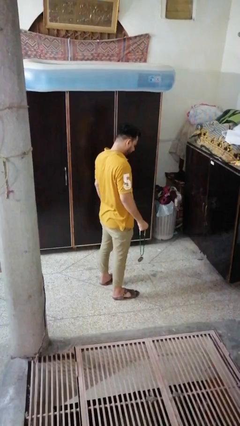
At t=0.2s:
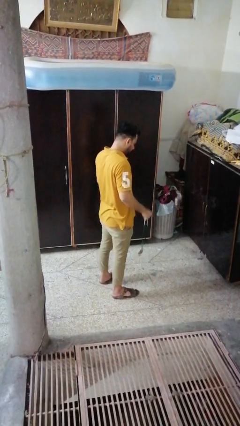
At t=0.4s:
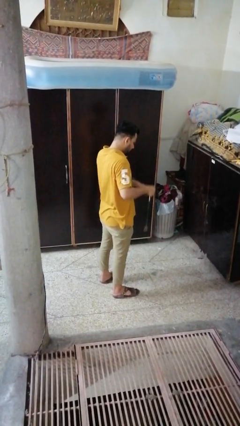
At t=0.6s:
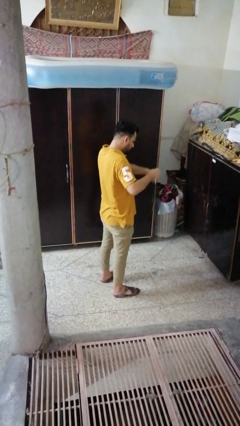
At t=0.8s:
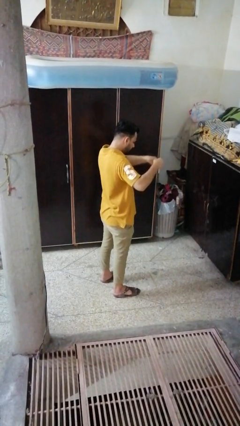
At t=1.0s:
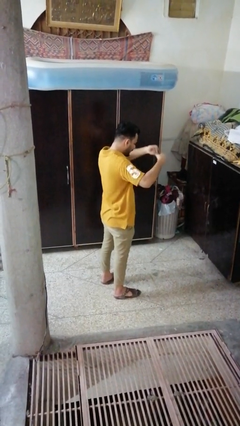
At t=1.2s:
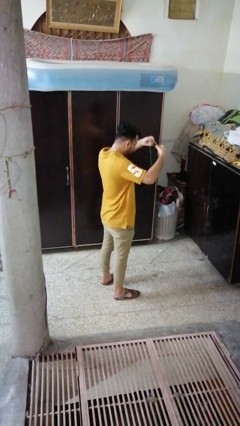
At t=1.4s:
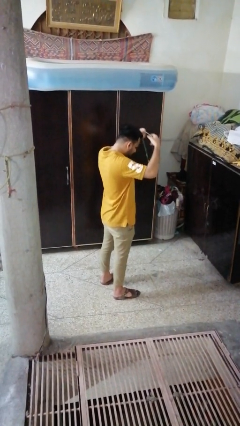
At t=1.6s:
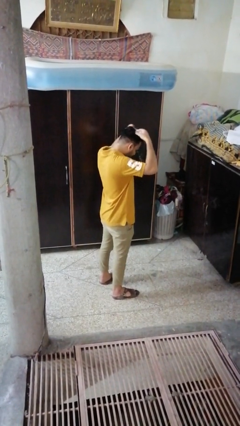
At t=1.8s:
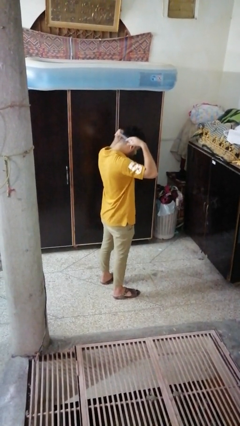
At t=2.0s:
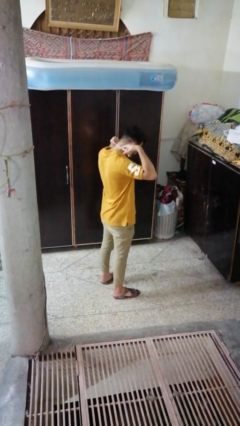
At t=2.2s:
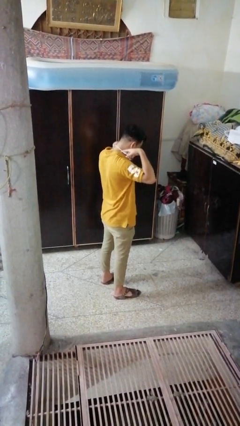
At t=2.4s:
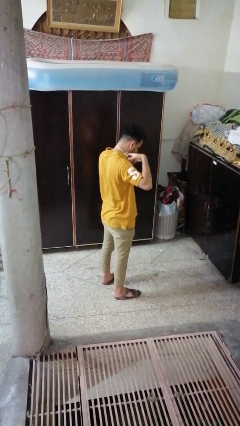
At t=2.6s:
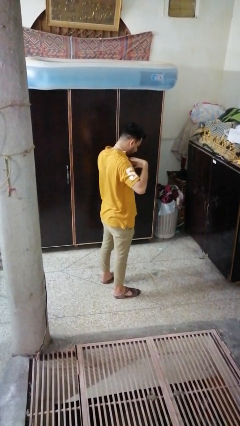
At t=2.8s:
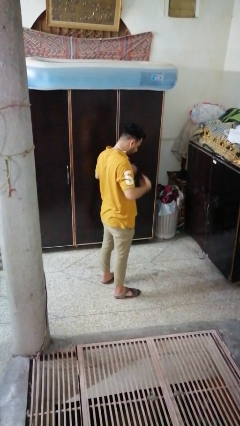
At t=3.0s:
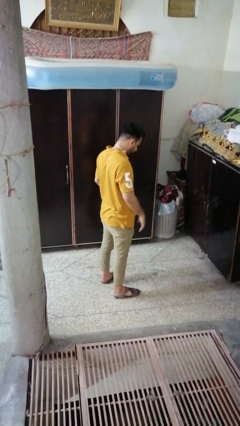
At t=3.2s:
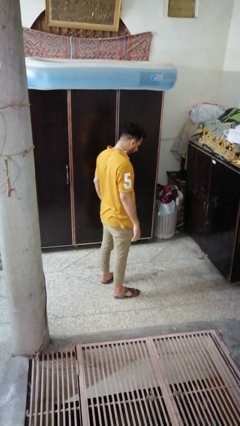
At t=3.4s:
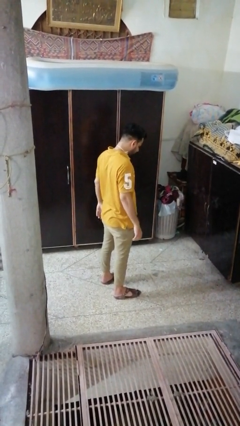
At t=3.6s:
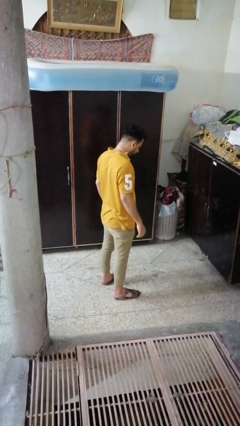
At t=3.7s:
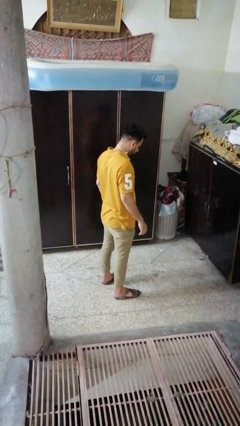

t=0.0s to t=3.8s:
person puts on necklace

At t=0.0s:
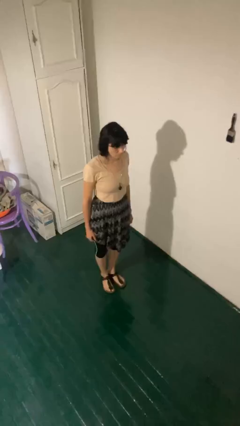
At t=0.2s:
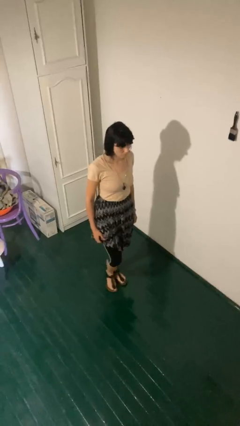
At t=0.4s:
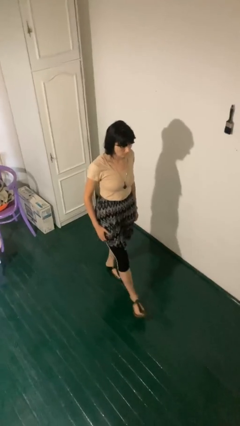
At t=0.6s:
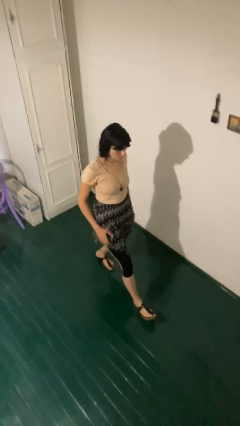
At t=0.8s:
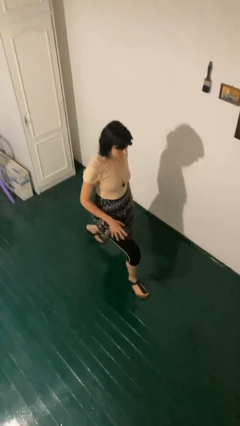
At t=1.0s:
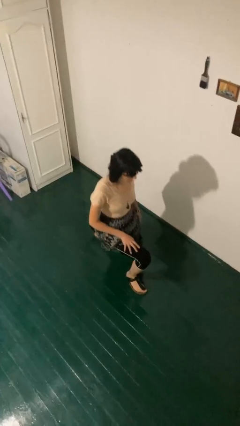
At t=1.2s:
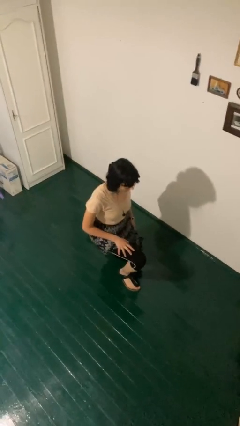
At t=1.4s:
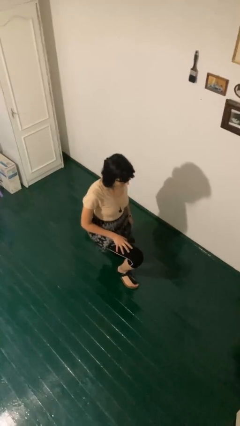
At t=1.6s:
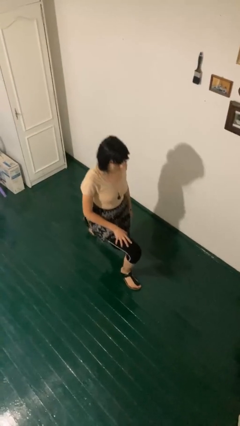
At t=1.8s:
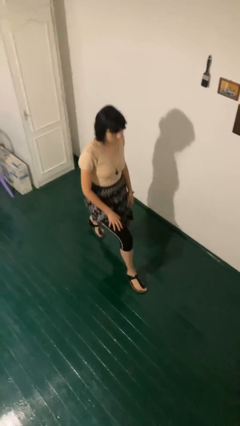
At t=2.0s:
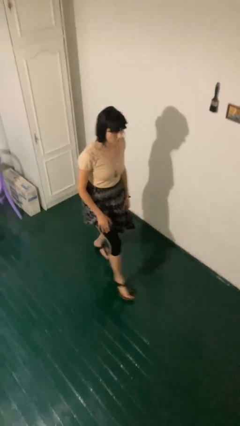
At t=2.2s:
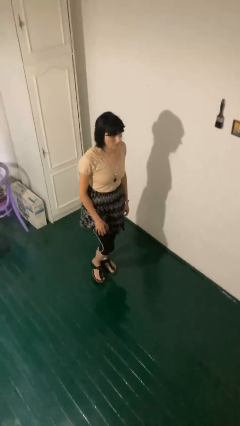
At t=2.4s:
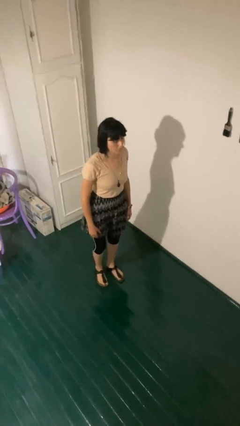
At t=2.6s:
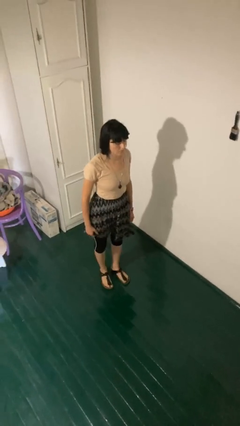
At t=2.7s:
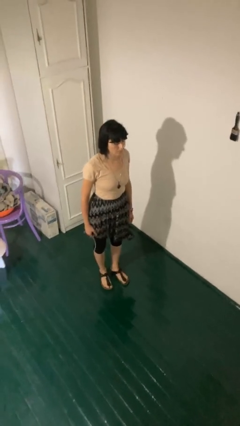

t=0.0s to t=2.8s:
person exercises with lunges

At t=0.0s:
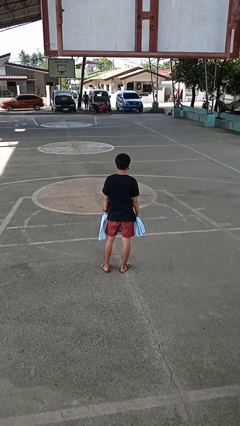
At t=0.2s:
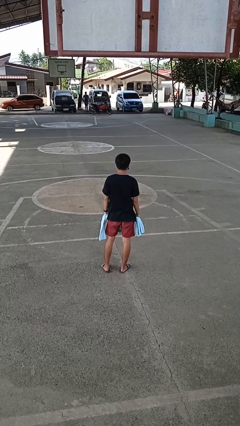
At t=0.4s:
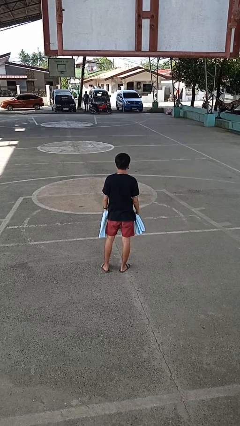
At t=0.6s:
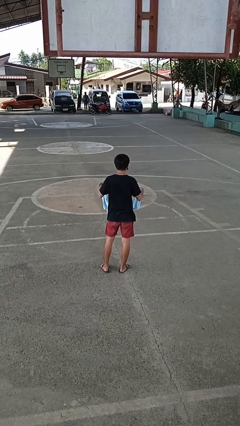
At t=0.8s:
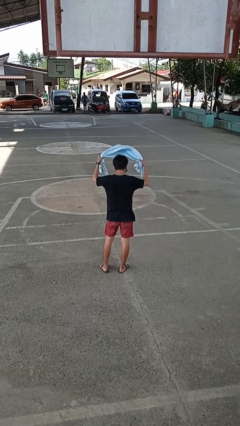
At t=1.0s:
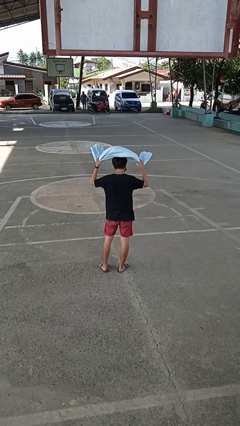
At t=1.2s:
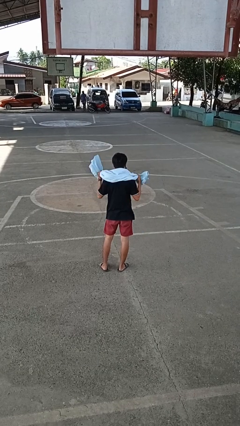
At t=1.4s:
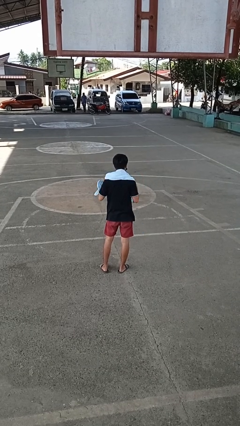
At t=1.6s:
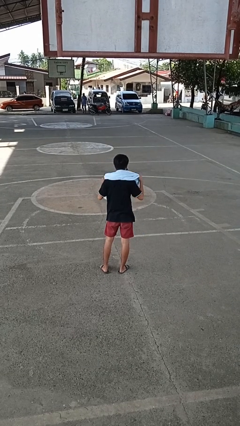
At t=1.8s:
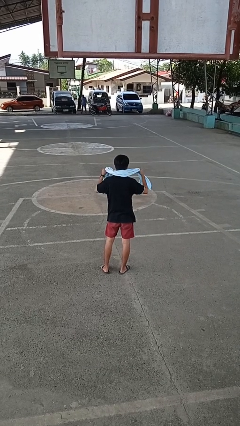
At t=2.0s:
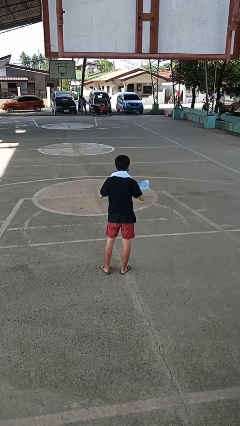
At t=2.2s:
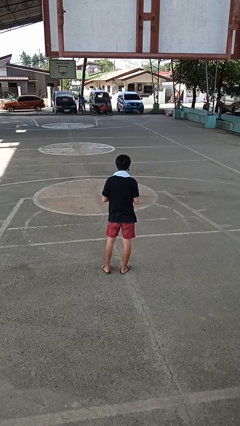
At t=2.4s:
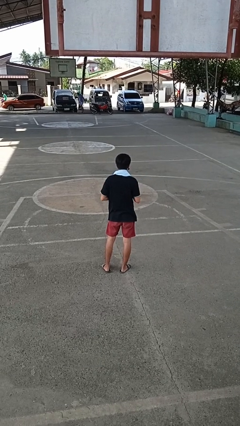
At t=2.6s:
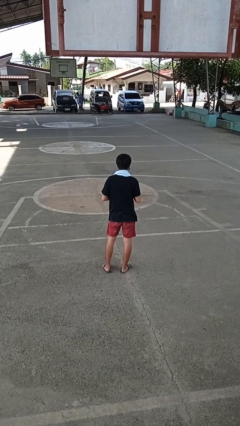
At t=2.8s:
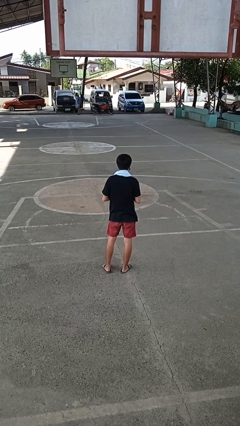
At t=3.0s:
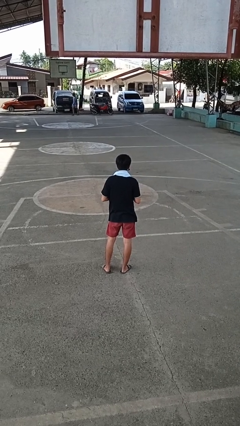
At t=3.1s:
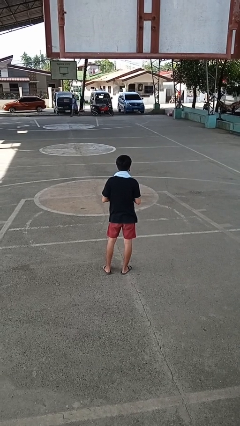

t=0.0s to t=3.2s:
person puts on scarf

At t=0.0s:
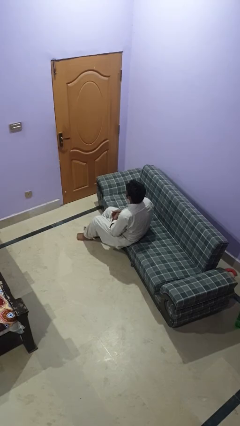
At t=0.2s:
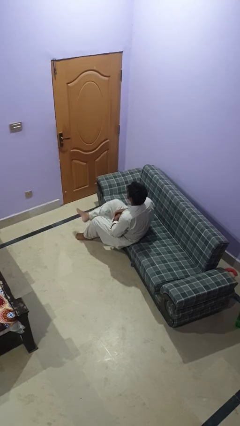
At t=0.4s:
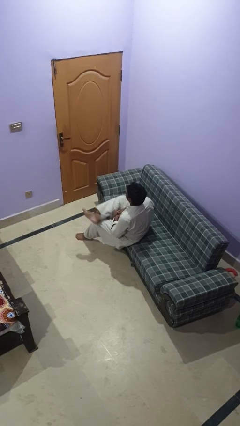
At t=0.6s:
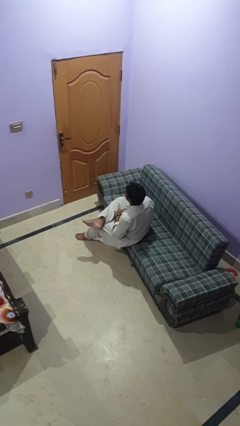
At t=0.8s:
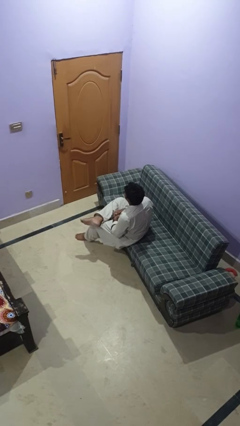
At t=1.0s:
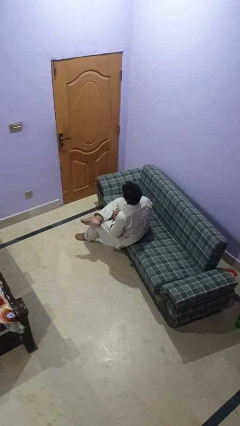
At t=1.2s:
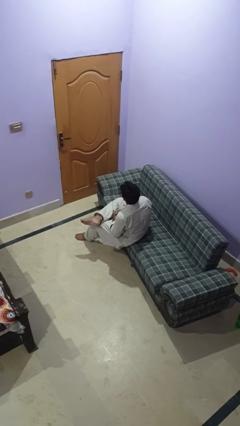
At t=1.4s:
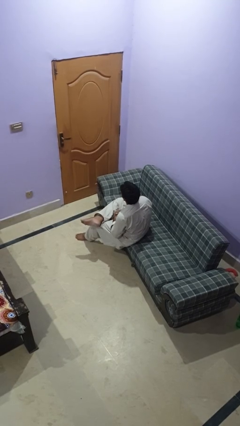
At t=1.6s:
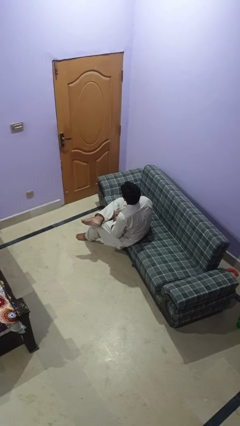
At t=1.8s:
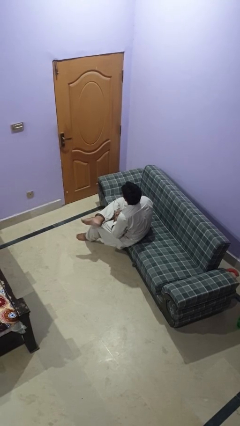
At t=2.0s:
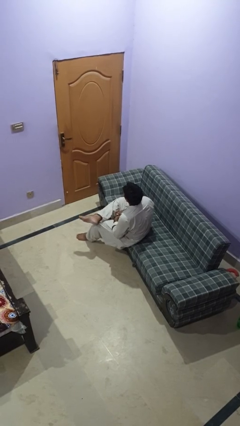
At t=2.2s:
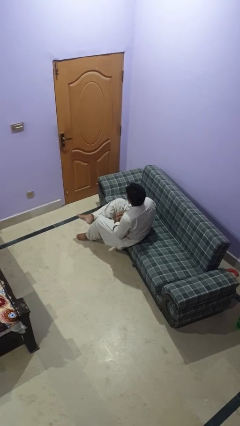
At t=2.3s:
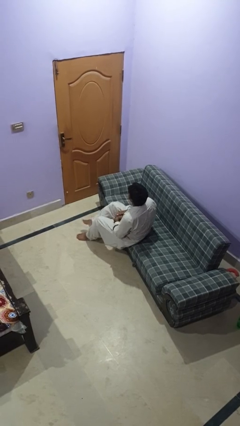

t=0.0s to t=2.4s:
person crosses legs

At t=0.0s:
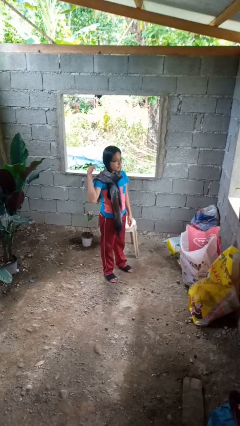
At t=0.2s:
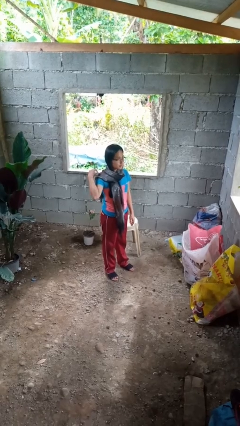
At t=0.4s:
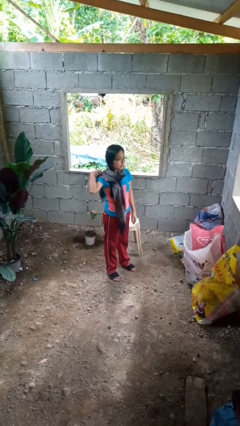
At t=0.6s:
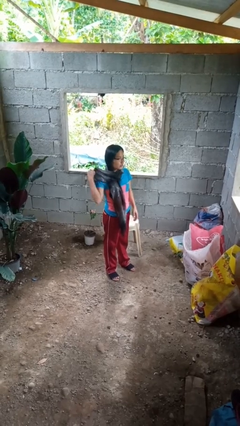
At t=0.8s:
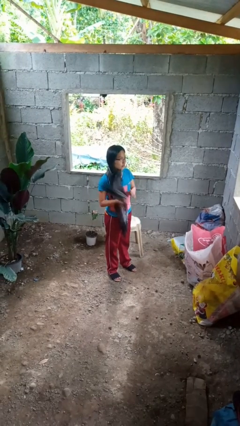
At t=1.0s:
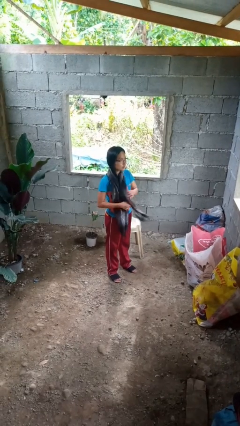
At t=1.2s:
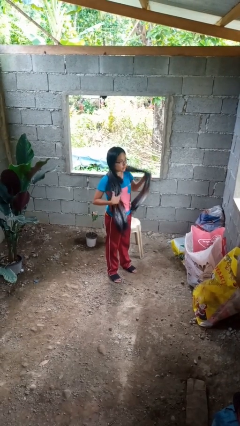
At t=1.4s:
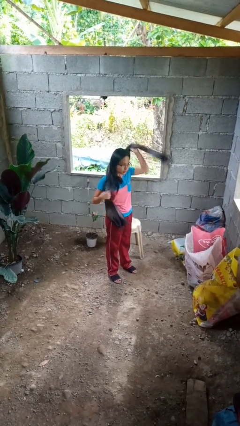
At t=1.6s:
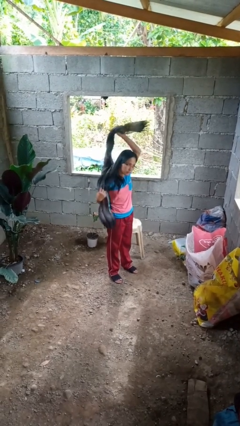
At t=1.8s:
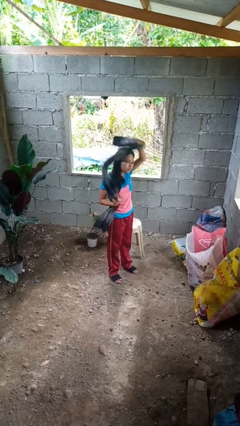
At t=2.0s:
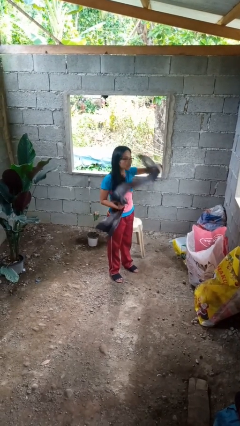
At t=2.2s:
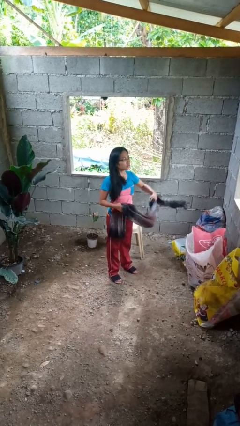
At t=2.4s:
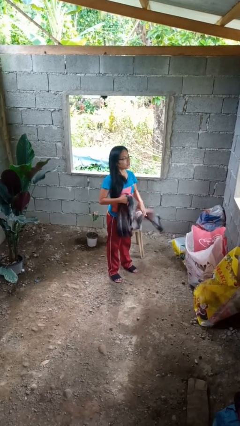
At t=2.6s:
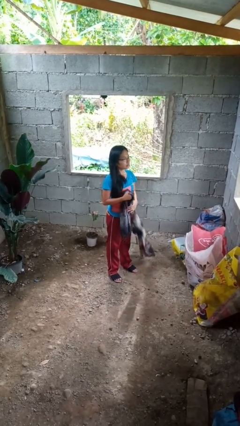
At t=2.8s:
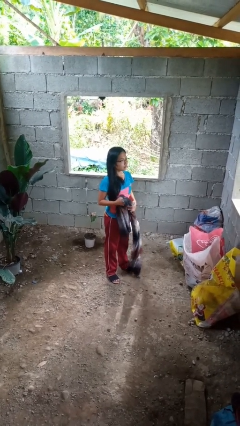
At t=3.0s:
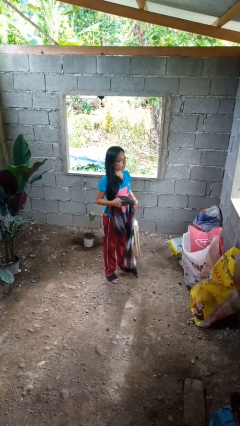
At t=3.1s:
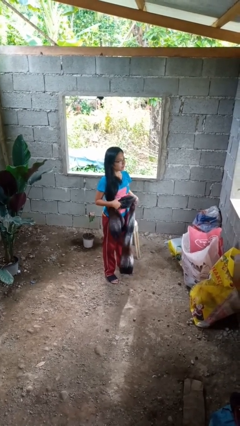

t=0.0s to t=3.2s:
person takes off scarf

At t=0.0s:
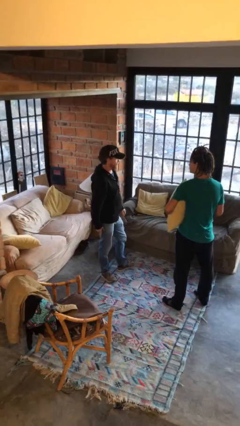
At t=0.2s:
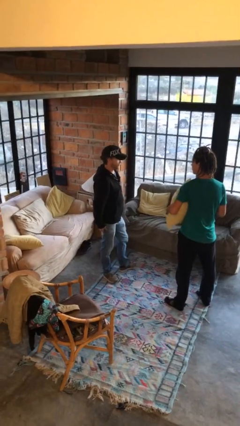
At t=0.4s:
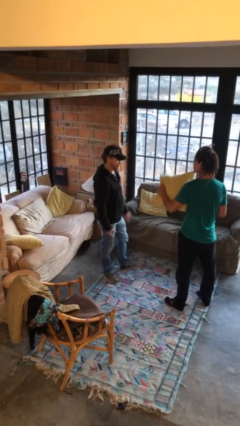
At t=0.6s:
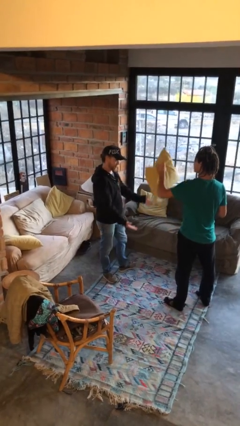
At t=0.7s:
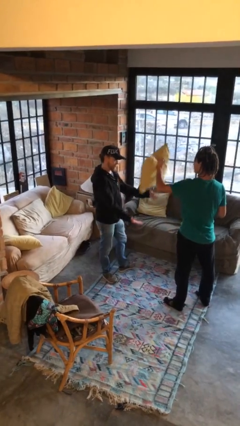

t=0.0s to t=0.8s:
person transfers object to person

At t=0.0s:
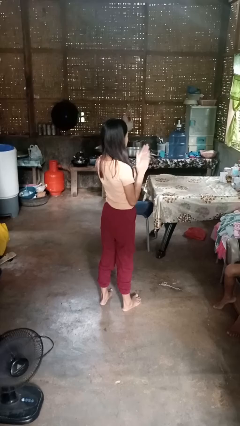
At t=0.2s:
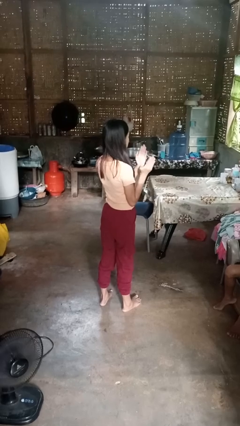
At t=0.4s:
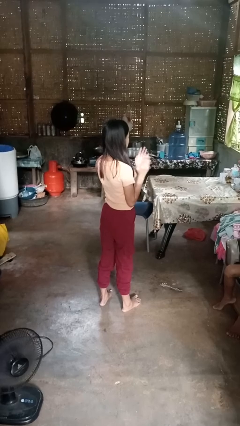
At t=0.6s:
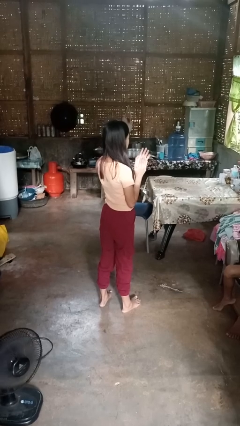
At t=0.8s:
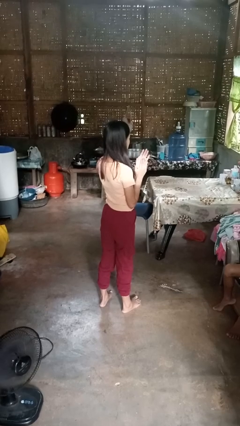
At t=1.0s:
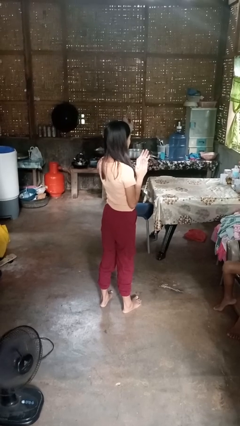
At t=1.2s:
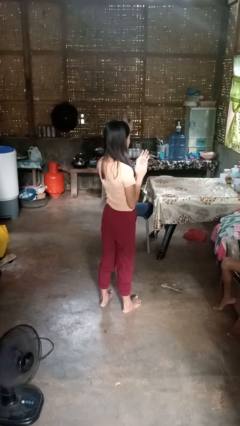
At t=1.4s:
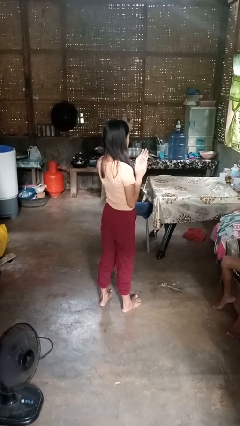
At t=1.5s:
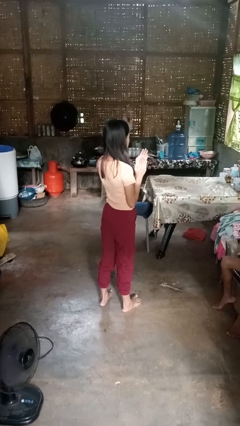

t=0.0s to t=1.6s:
person claps hands
